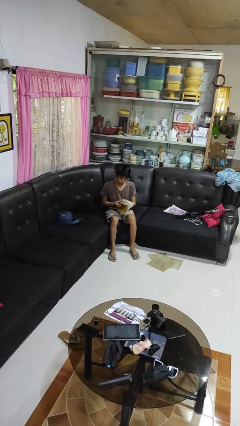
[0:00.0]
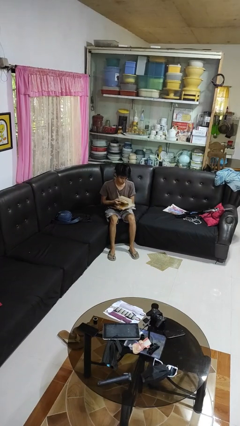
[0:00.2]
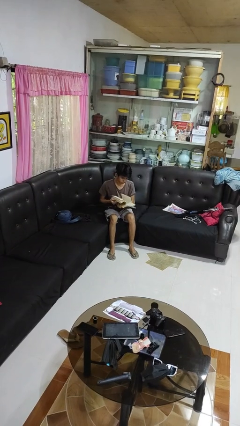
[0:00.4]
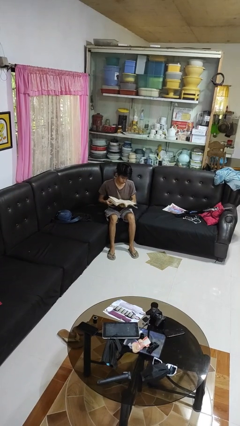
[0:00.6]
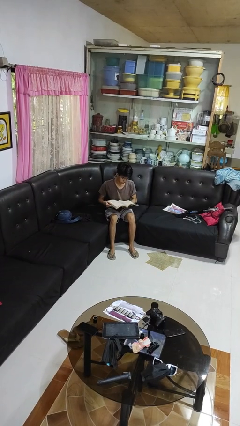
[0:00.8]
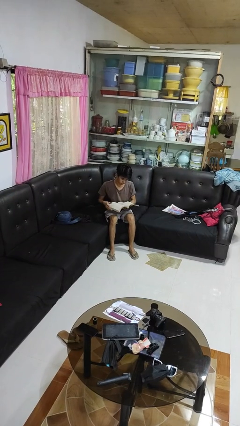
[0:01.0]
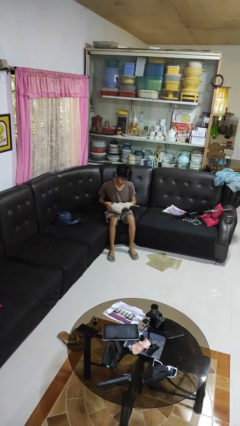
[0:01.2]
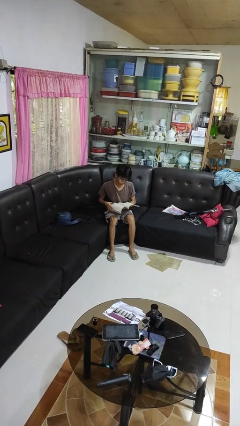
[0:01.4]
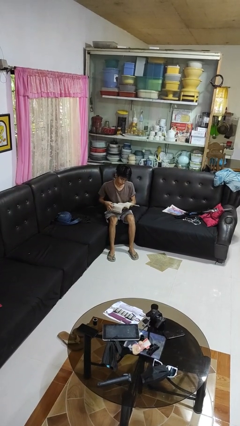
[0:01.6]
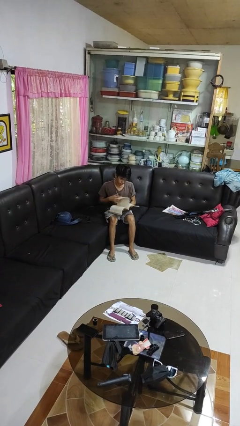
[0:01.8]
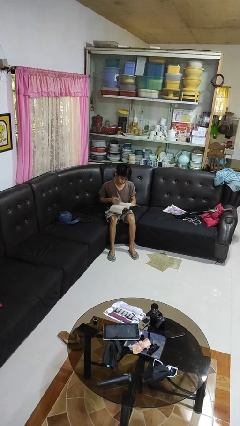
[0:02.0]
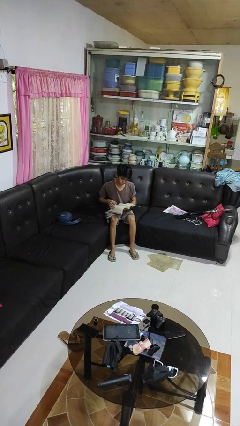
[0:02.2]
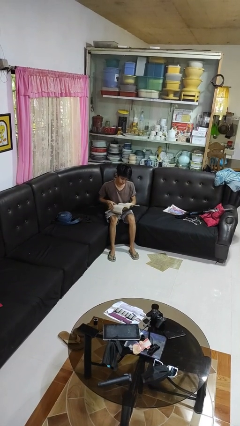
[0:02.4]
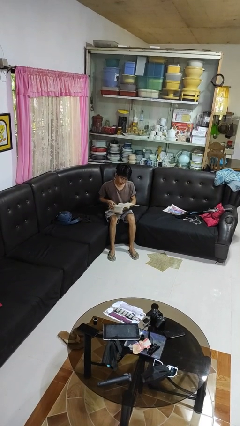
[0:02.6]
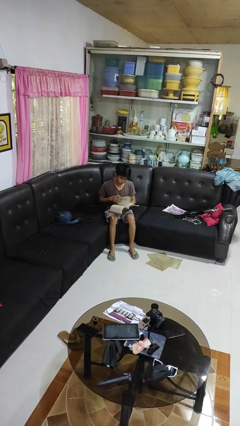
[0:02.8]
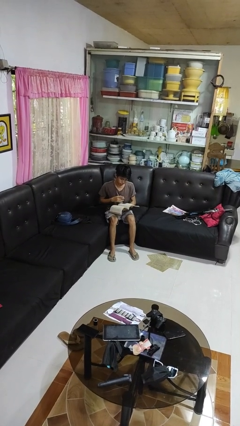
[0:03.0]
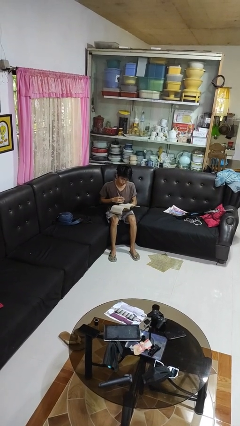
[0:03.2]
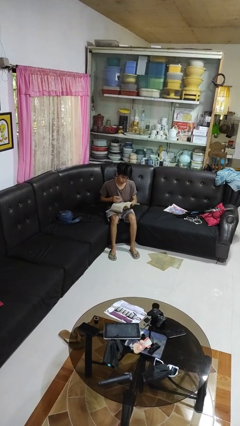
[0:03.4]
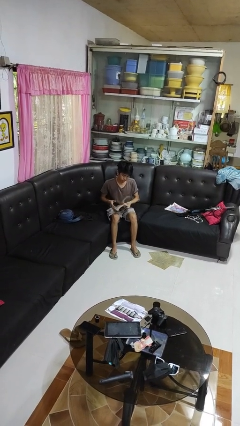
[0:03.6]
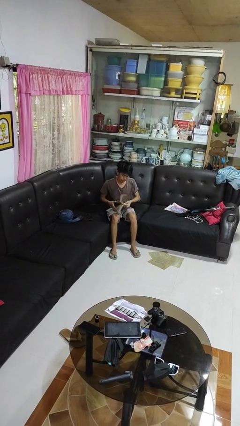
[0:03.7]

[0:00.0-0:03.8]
person reads book

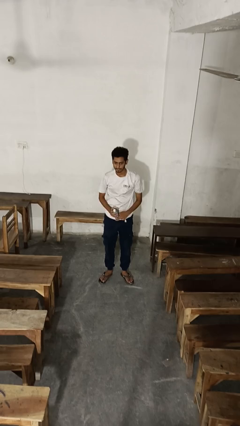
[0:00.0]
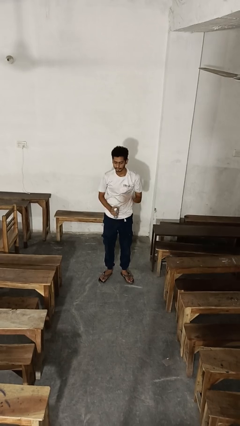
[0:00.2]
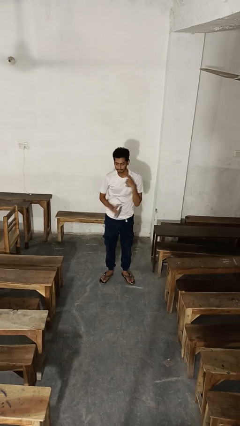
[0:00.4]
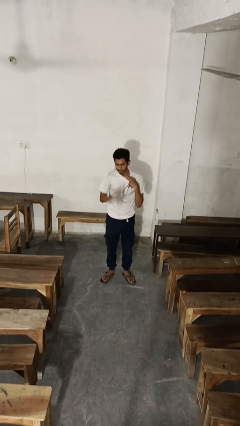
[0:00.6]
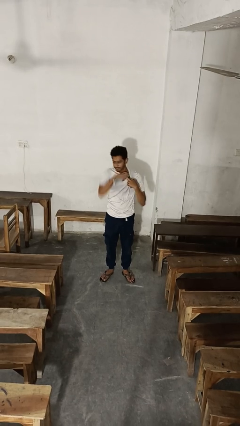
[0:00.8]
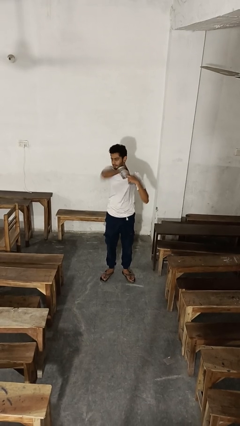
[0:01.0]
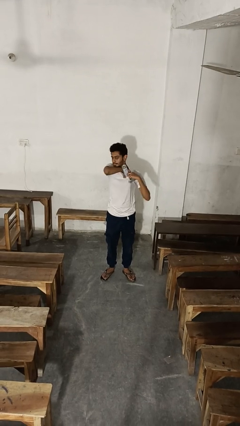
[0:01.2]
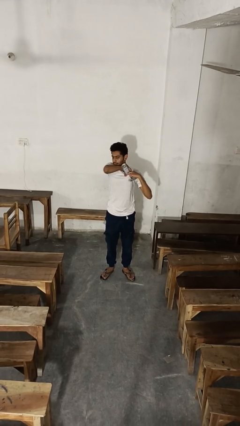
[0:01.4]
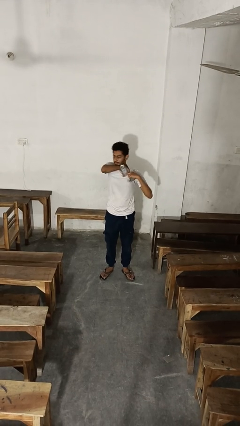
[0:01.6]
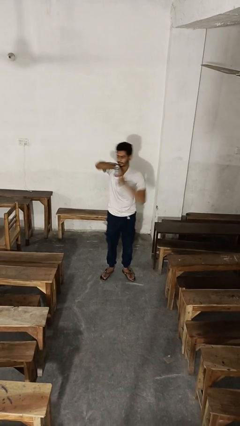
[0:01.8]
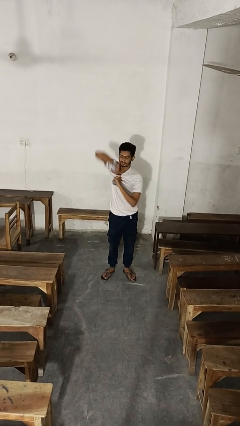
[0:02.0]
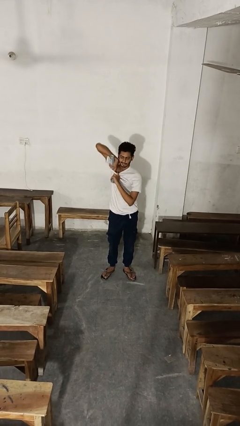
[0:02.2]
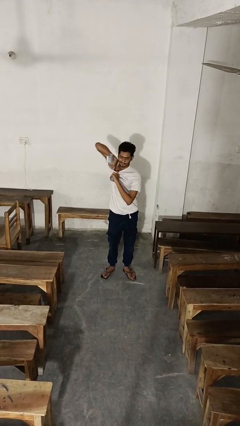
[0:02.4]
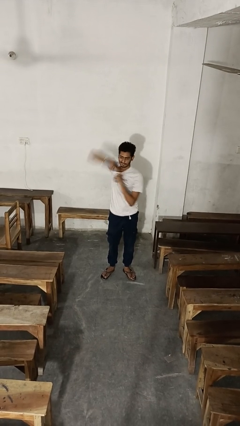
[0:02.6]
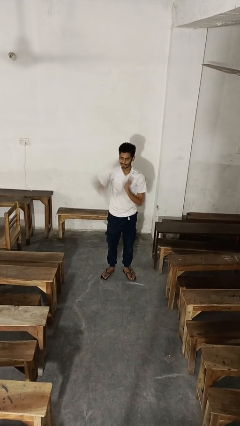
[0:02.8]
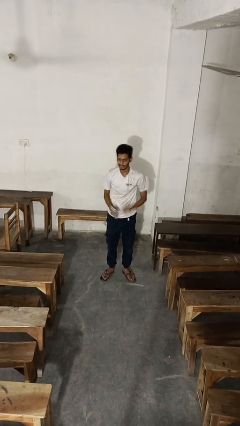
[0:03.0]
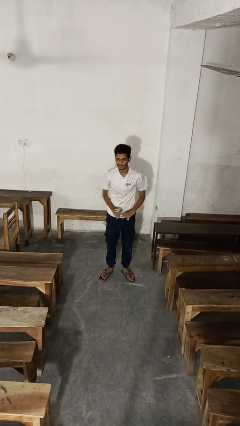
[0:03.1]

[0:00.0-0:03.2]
person applies deodorant

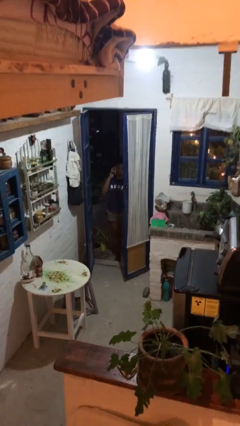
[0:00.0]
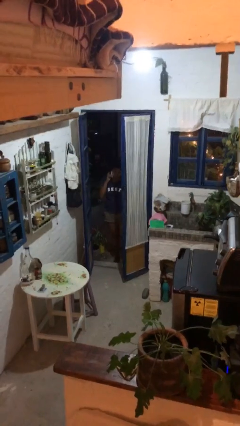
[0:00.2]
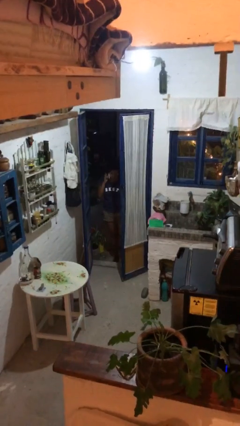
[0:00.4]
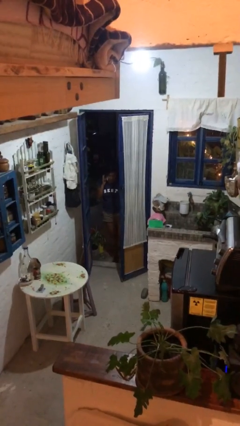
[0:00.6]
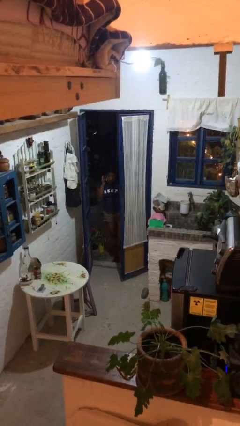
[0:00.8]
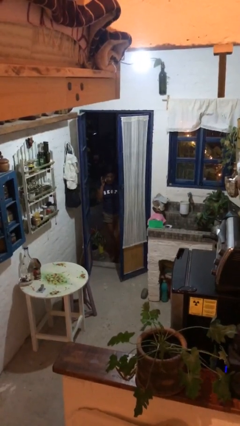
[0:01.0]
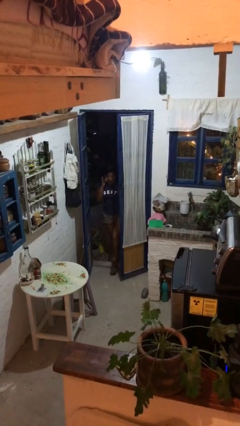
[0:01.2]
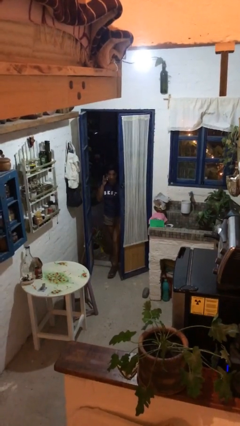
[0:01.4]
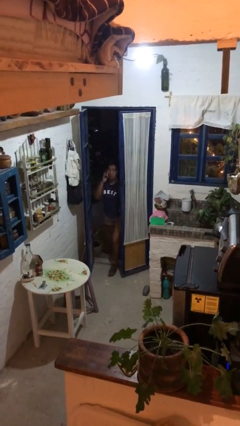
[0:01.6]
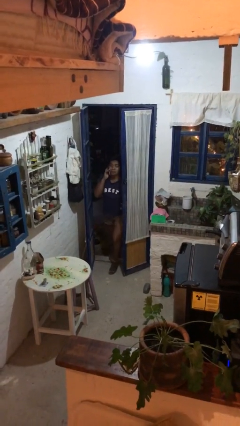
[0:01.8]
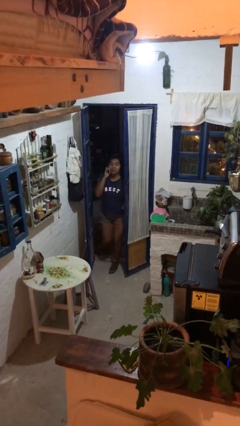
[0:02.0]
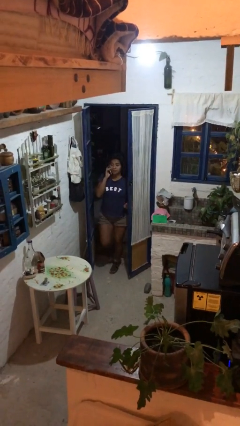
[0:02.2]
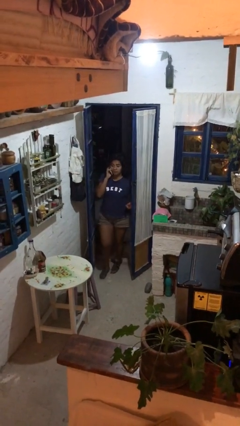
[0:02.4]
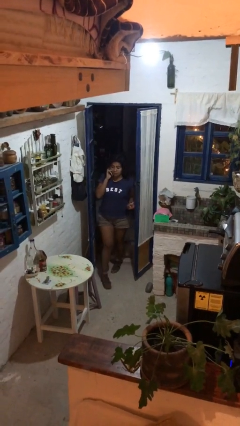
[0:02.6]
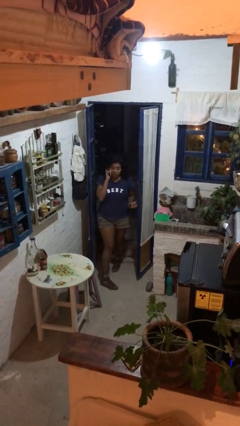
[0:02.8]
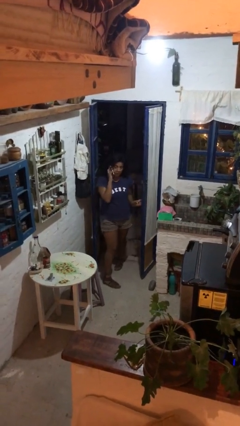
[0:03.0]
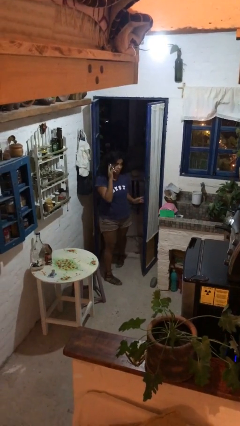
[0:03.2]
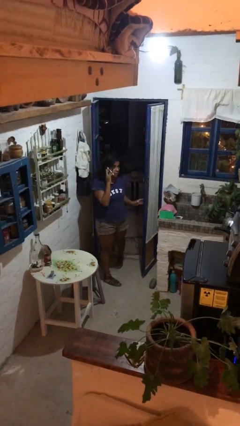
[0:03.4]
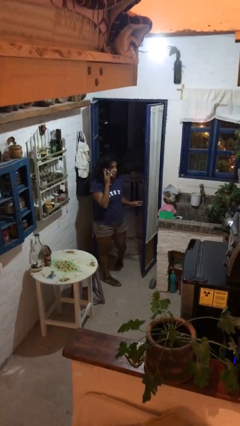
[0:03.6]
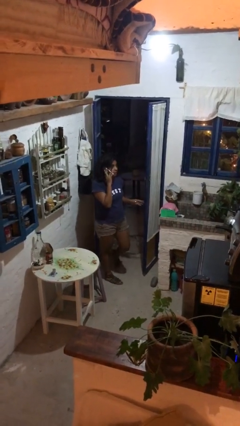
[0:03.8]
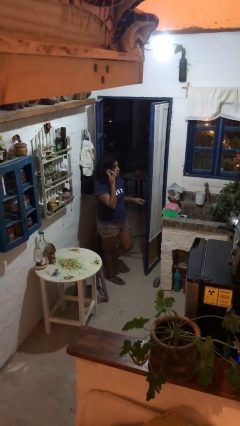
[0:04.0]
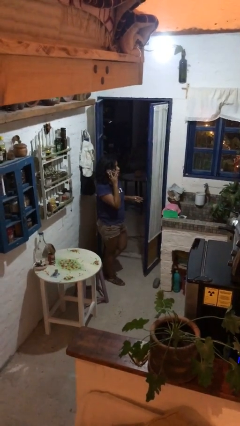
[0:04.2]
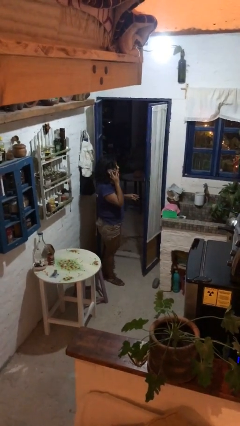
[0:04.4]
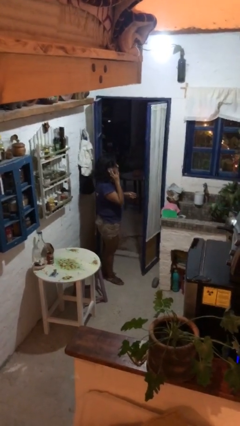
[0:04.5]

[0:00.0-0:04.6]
person enters scene through structure

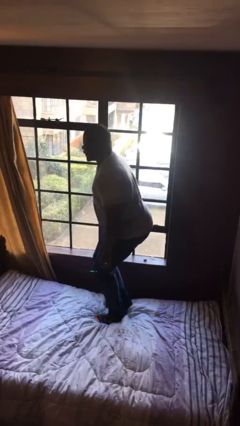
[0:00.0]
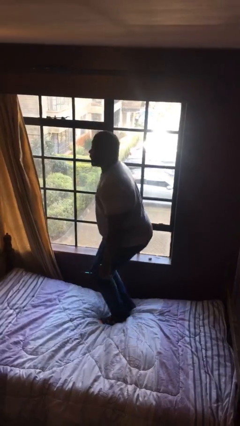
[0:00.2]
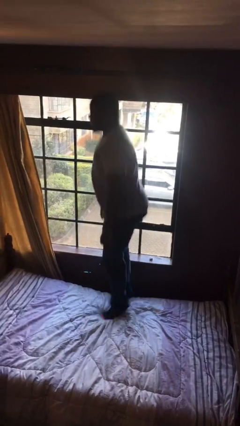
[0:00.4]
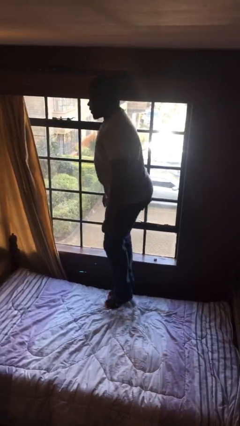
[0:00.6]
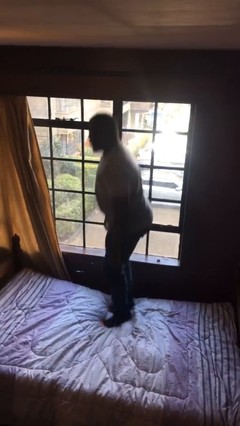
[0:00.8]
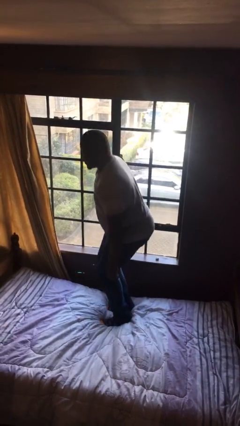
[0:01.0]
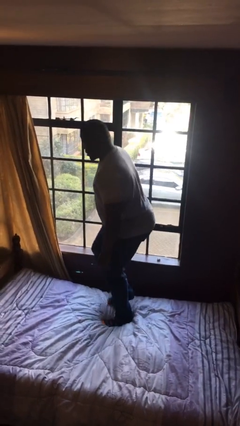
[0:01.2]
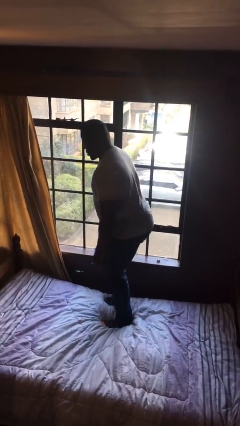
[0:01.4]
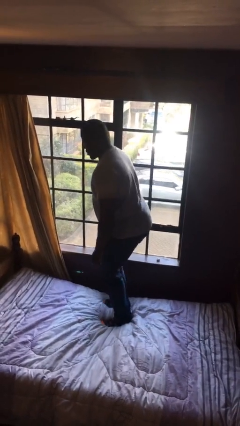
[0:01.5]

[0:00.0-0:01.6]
person jumps on bed

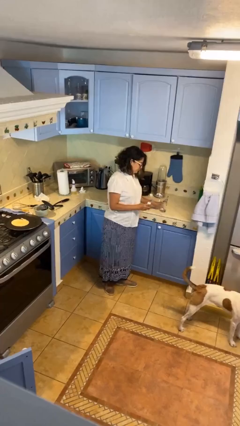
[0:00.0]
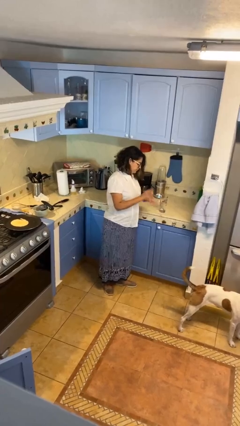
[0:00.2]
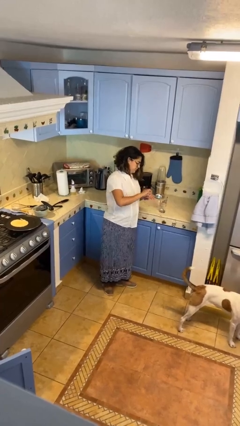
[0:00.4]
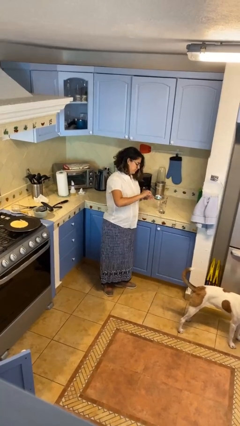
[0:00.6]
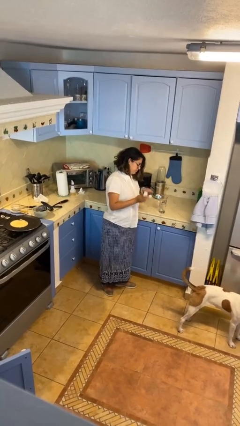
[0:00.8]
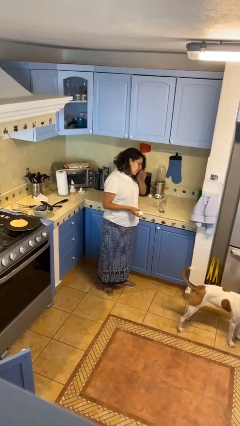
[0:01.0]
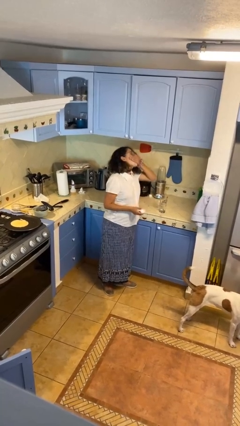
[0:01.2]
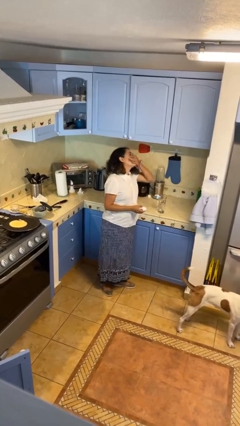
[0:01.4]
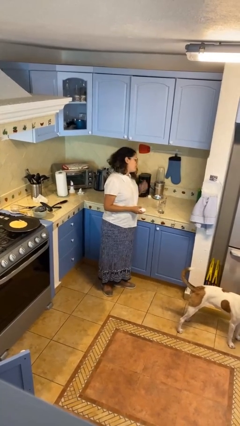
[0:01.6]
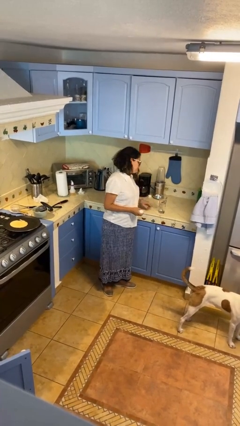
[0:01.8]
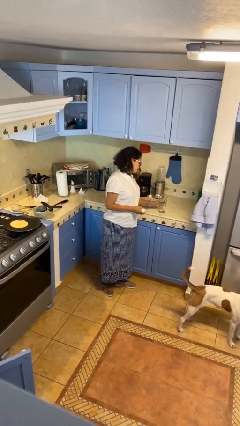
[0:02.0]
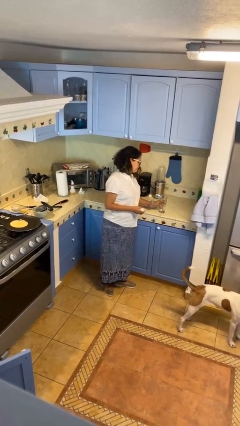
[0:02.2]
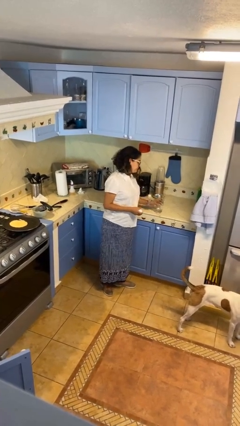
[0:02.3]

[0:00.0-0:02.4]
person takes medicine pills

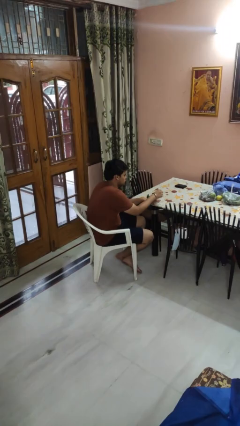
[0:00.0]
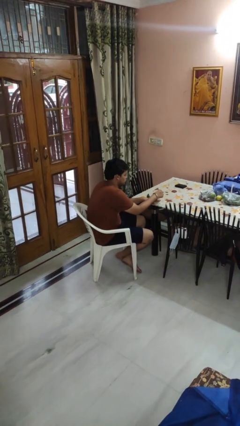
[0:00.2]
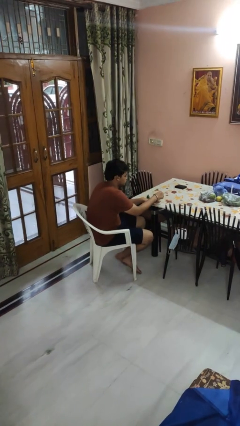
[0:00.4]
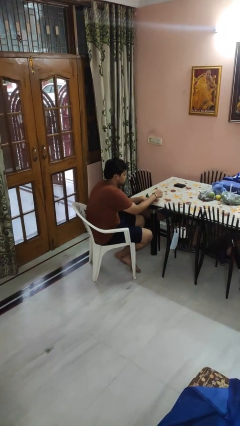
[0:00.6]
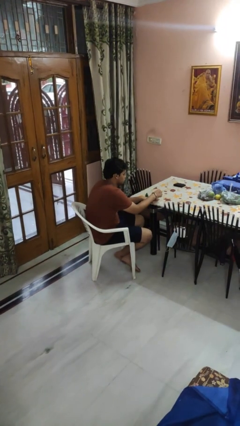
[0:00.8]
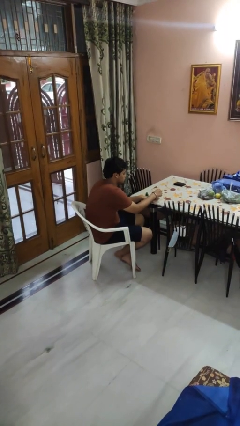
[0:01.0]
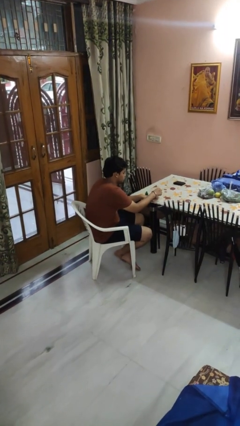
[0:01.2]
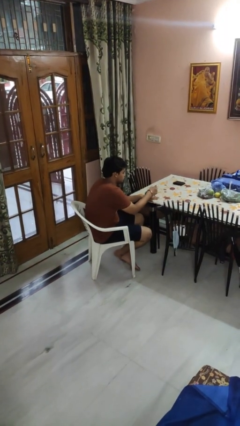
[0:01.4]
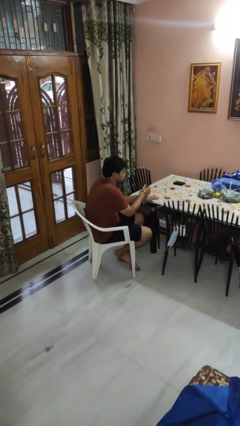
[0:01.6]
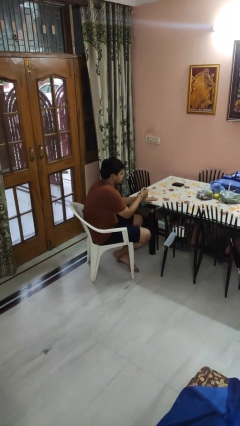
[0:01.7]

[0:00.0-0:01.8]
person paints fingernails

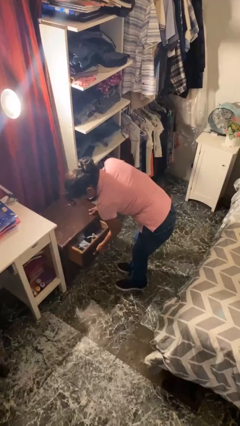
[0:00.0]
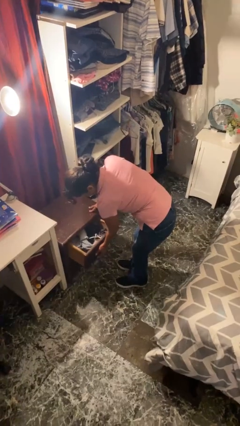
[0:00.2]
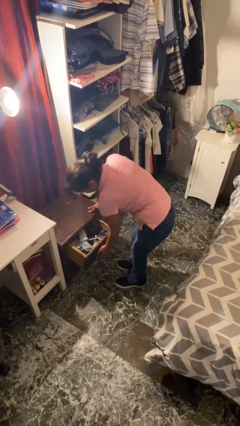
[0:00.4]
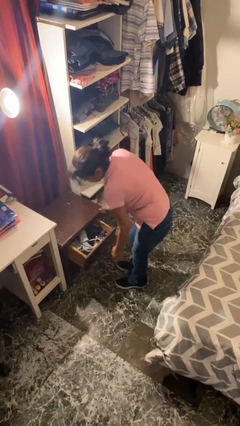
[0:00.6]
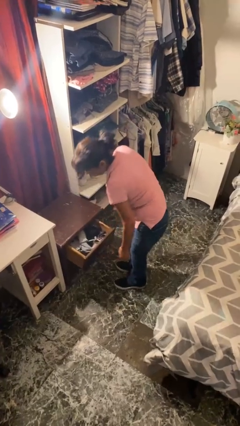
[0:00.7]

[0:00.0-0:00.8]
person opens dresser drawer
